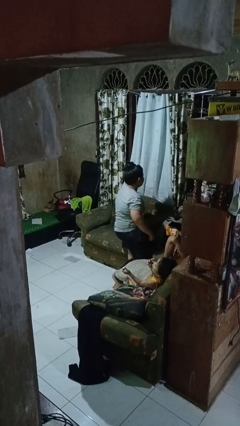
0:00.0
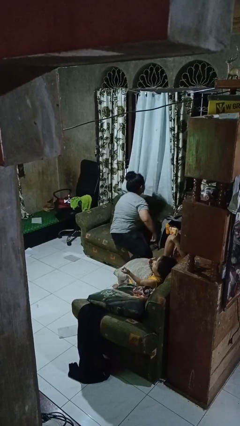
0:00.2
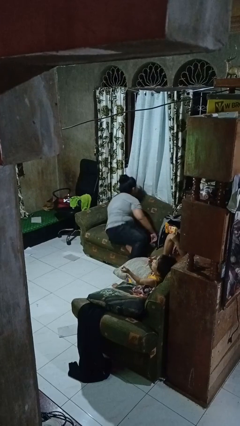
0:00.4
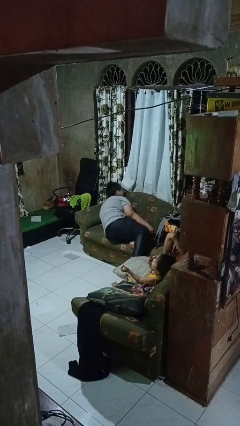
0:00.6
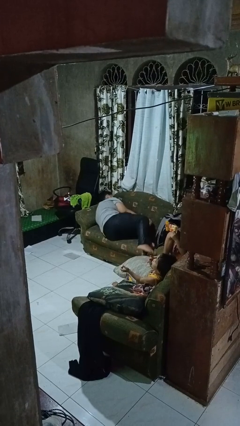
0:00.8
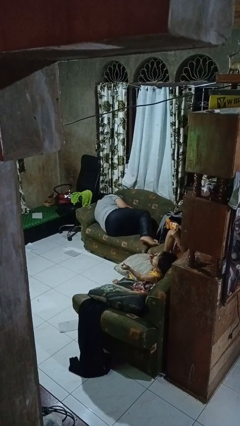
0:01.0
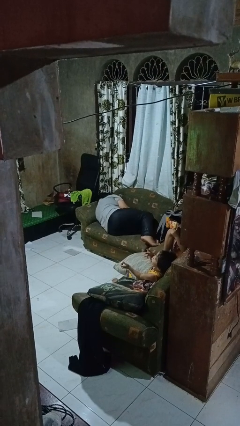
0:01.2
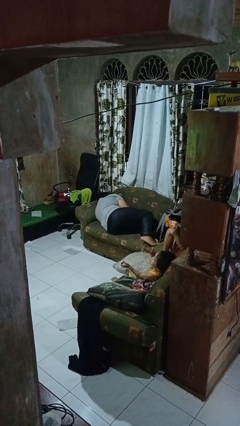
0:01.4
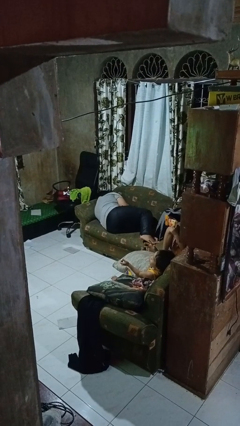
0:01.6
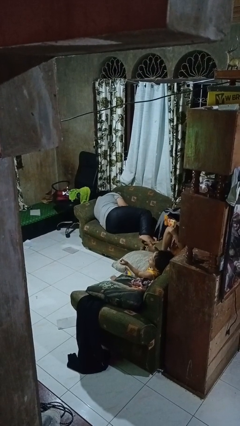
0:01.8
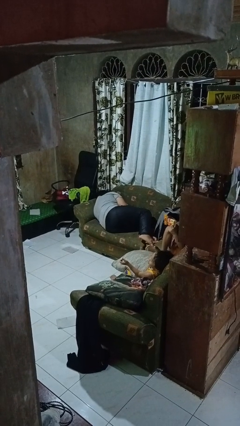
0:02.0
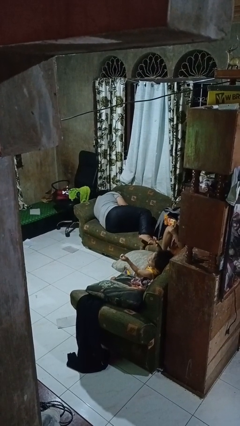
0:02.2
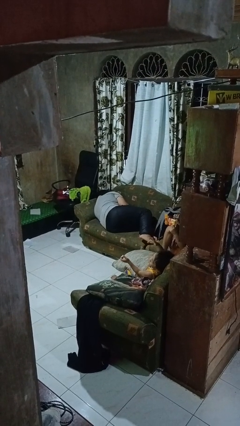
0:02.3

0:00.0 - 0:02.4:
person lies down on couch

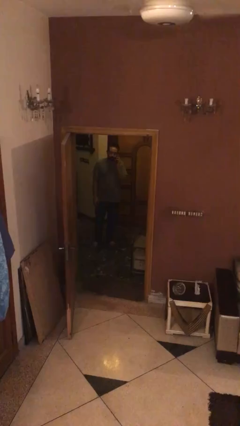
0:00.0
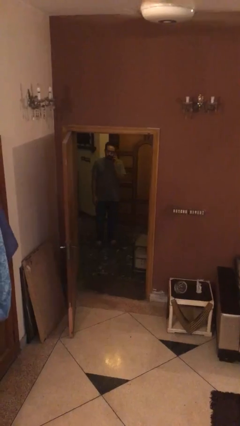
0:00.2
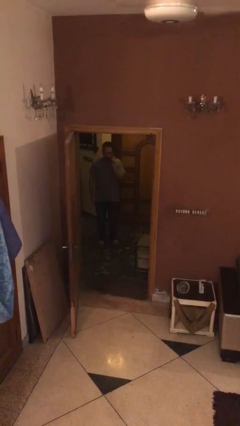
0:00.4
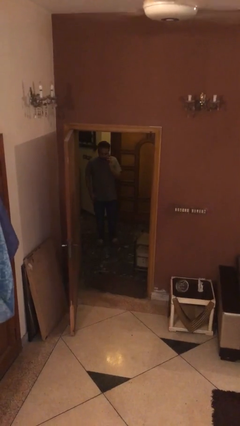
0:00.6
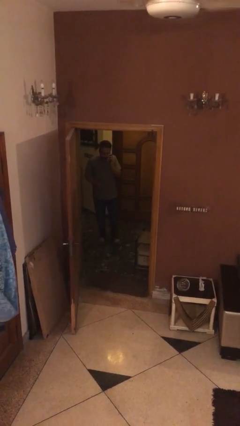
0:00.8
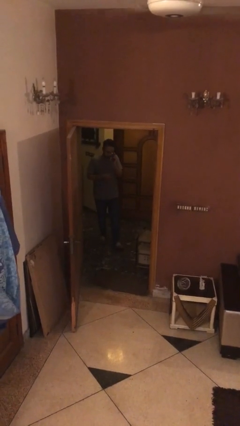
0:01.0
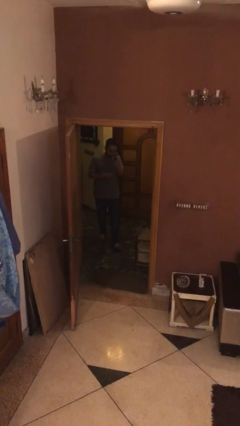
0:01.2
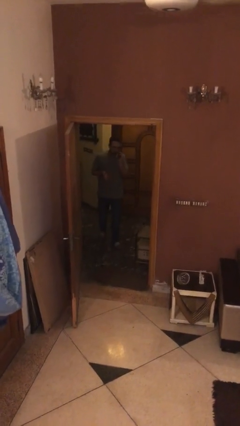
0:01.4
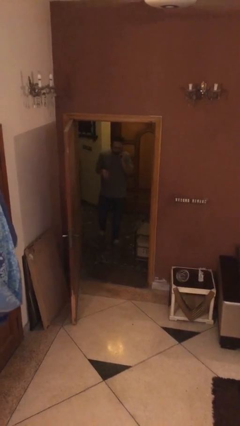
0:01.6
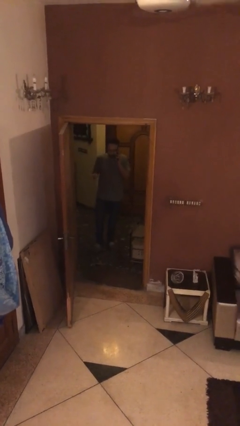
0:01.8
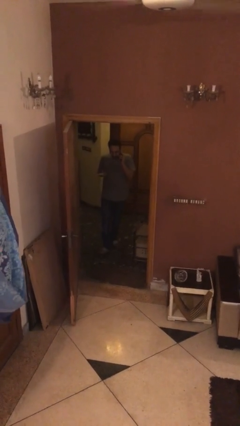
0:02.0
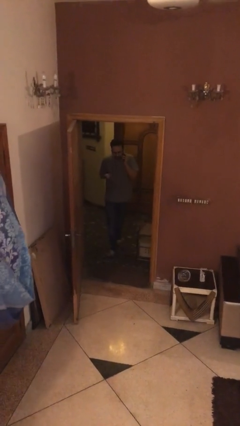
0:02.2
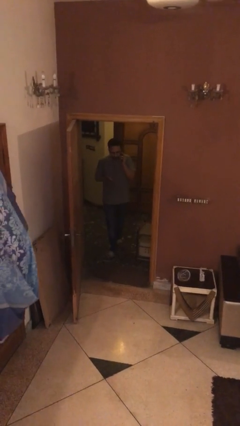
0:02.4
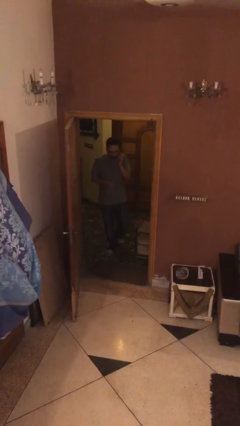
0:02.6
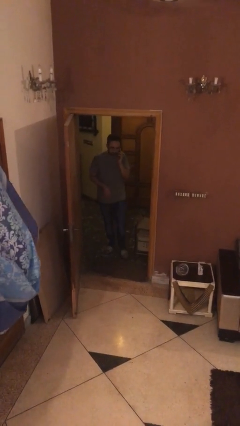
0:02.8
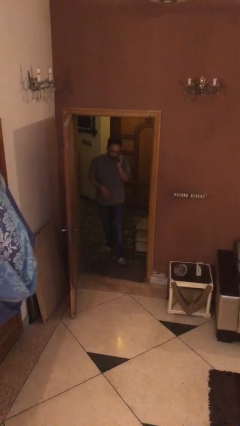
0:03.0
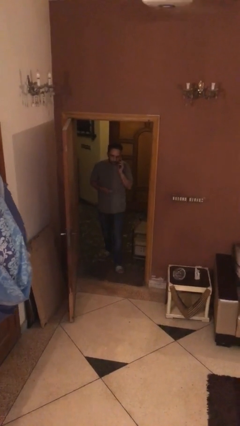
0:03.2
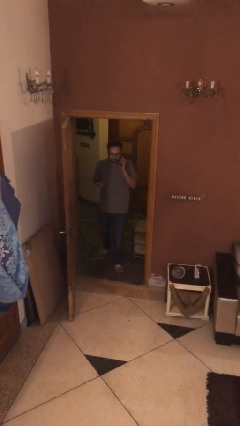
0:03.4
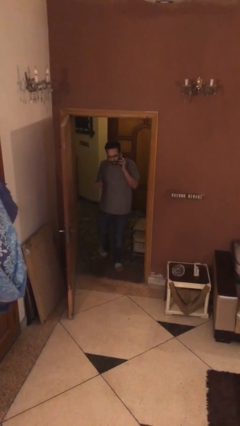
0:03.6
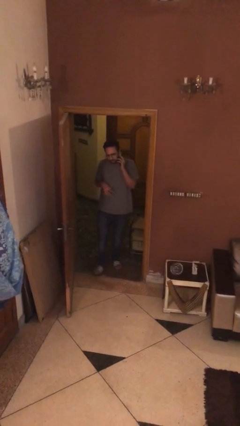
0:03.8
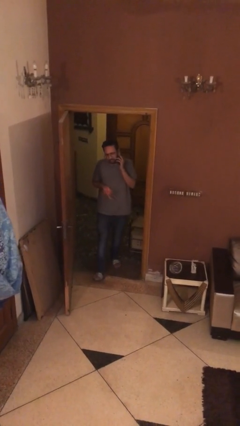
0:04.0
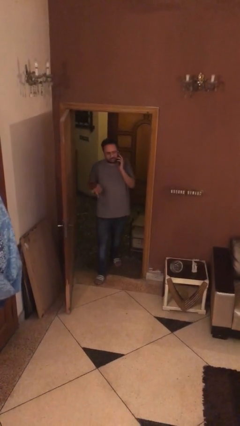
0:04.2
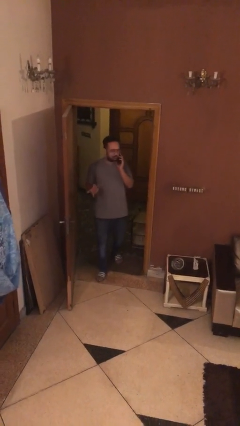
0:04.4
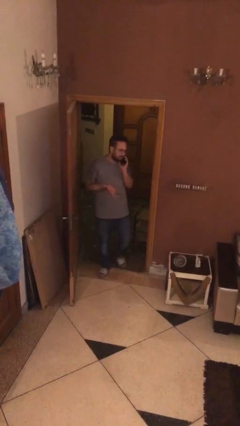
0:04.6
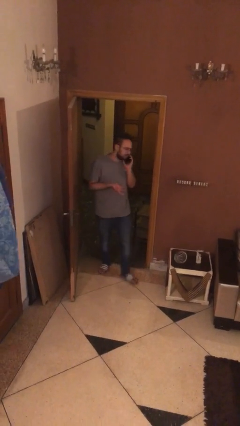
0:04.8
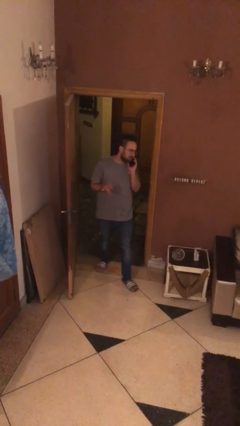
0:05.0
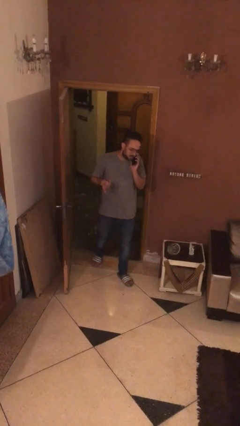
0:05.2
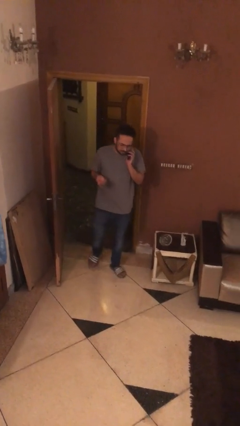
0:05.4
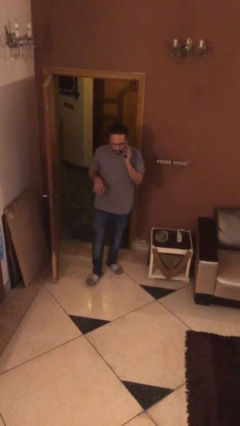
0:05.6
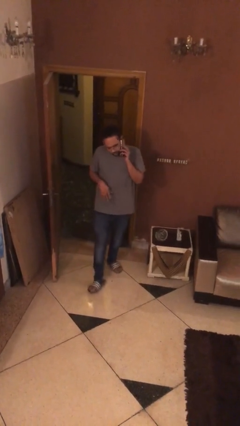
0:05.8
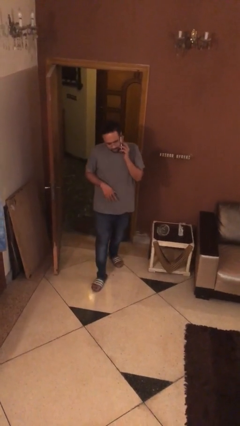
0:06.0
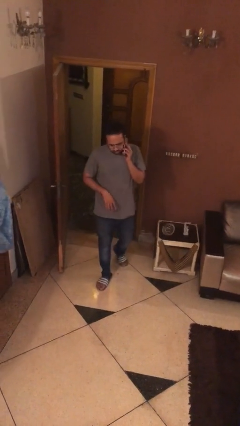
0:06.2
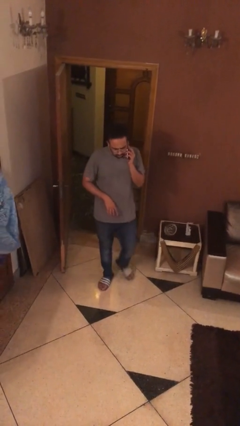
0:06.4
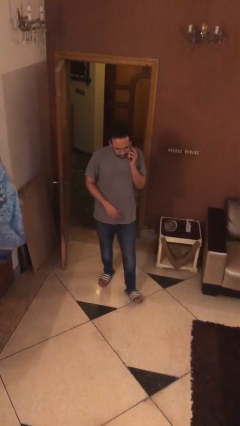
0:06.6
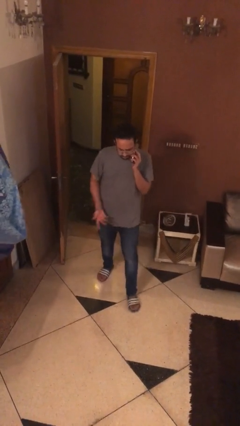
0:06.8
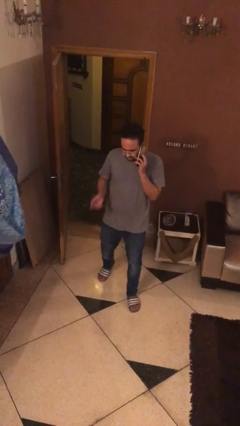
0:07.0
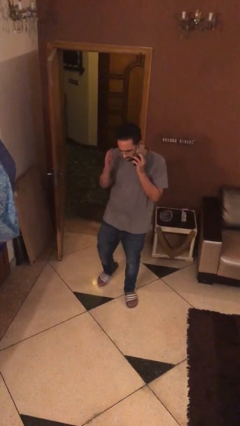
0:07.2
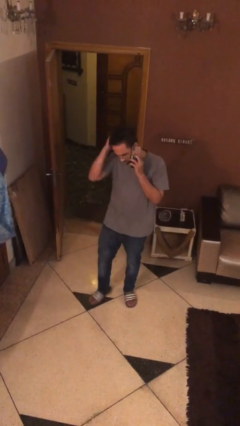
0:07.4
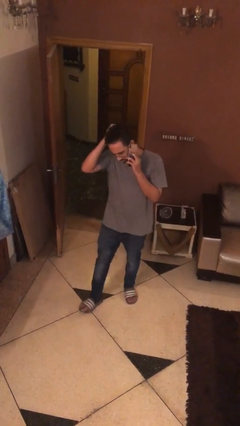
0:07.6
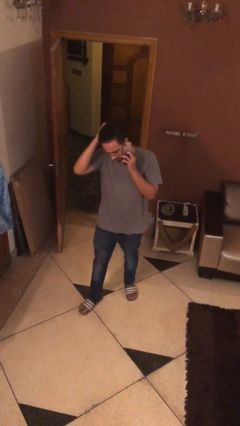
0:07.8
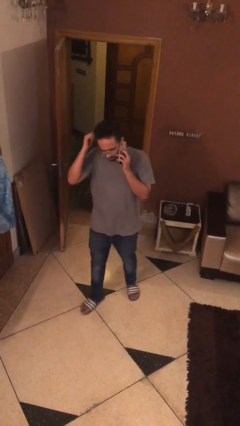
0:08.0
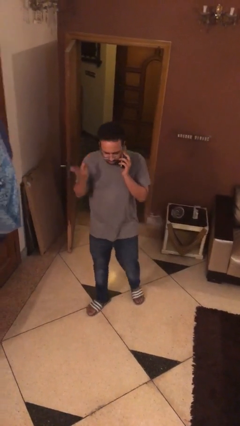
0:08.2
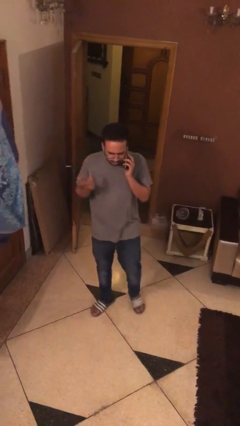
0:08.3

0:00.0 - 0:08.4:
person enters scene through structure

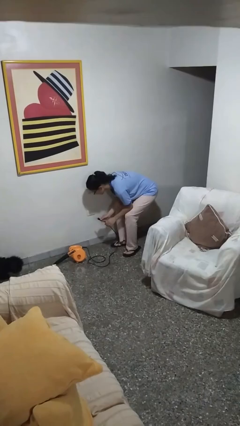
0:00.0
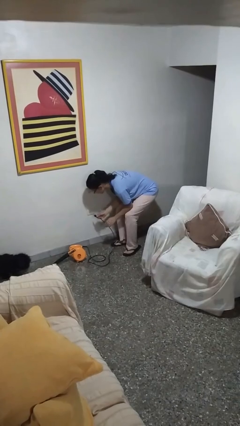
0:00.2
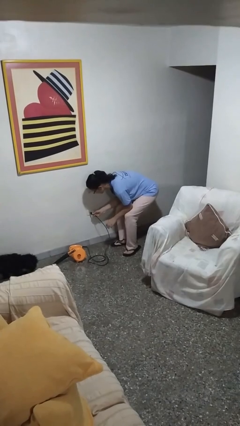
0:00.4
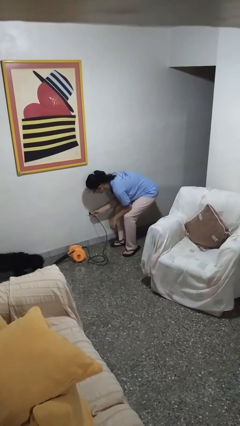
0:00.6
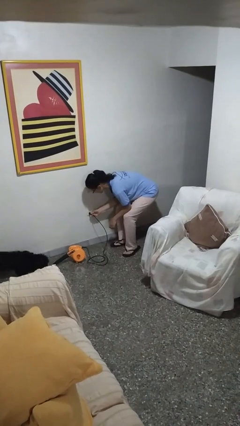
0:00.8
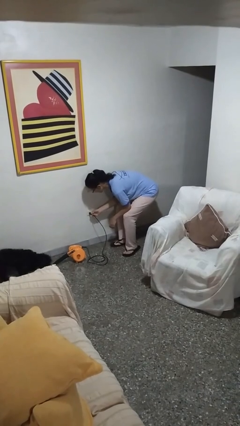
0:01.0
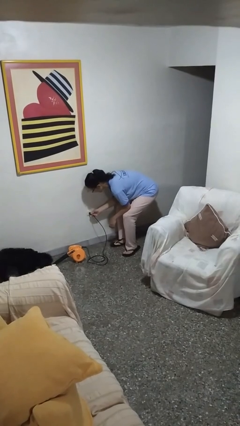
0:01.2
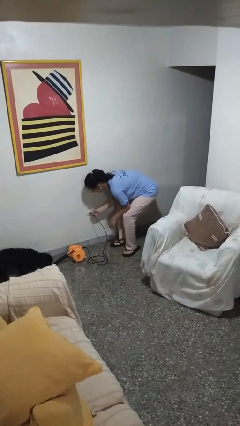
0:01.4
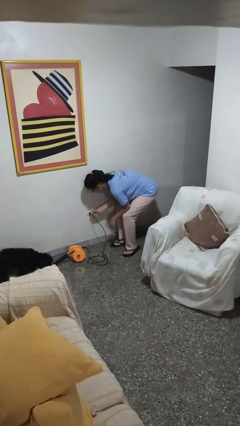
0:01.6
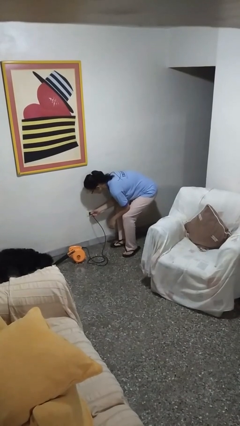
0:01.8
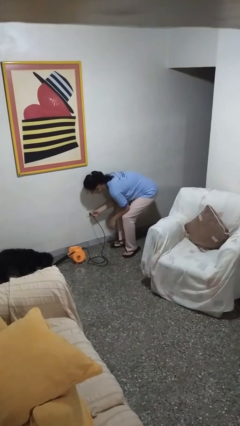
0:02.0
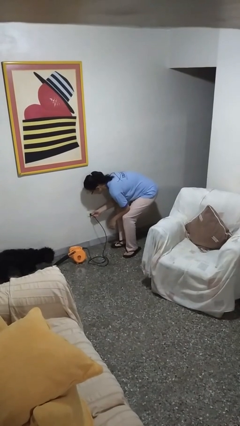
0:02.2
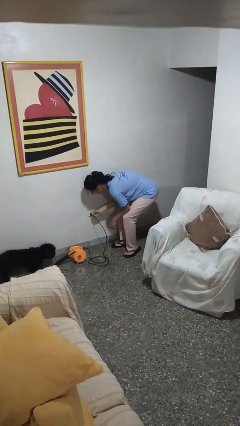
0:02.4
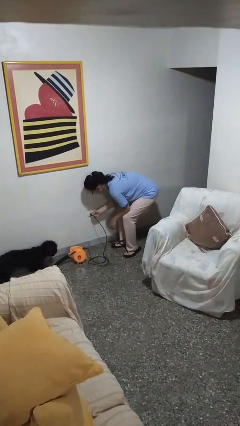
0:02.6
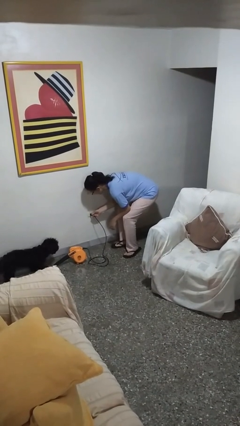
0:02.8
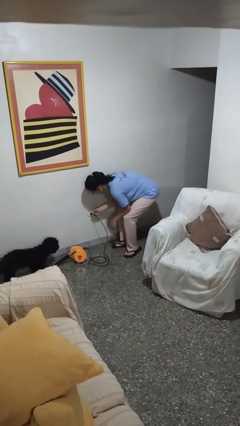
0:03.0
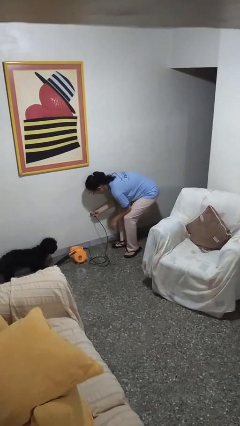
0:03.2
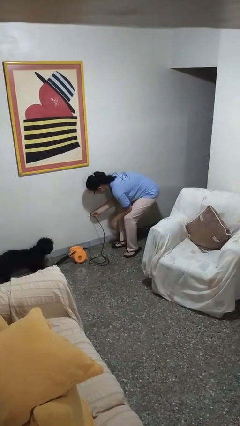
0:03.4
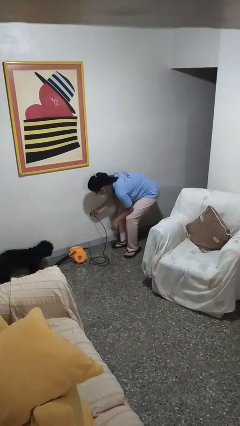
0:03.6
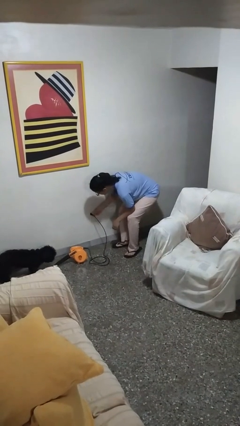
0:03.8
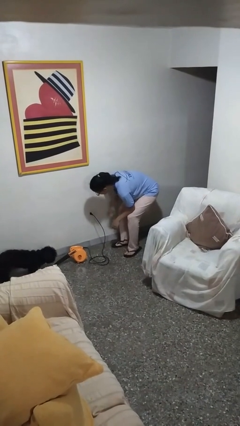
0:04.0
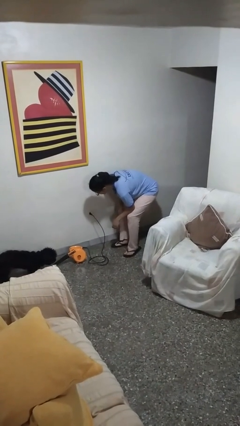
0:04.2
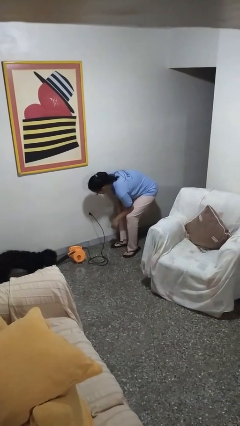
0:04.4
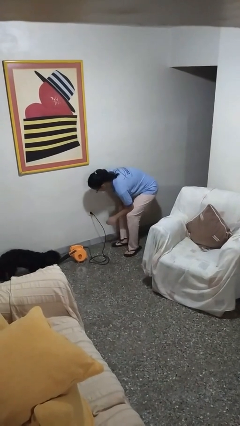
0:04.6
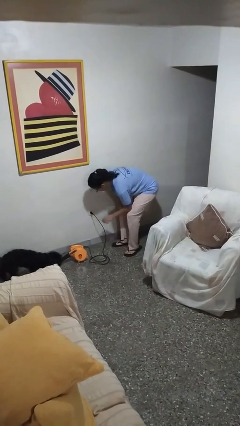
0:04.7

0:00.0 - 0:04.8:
person plugs into electrical socket

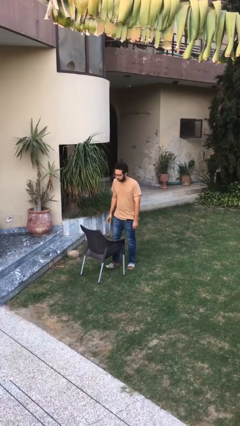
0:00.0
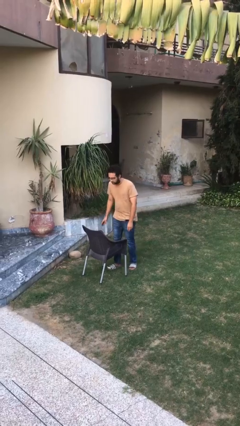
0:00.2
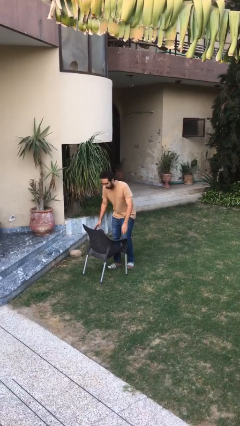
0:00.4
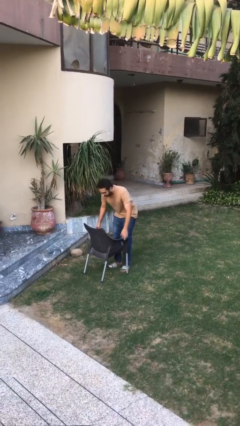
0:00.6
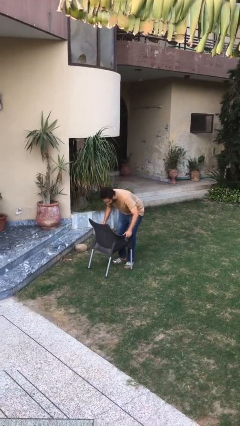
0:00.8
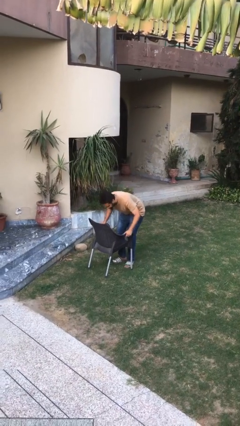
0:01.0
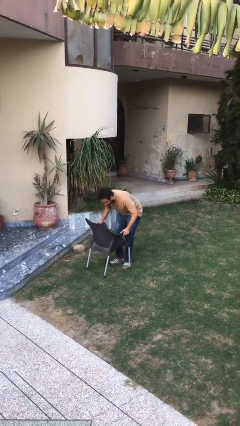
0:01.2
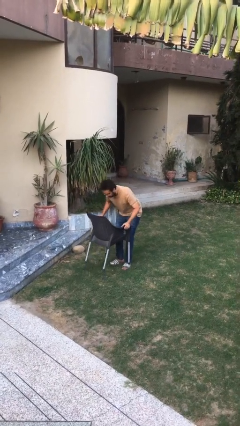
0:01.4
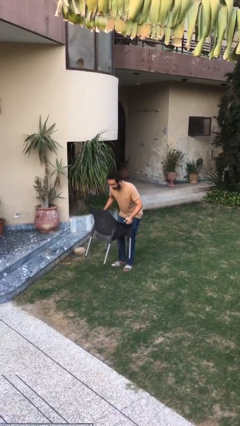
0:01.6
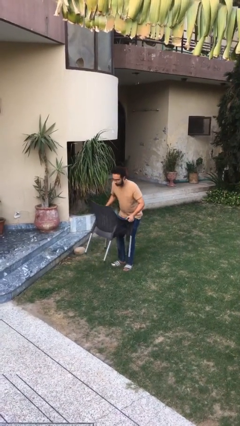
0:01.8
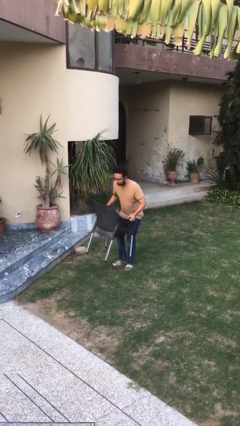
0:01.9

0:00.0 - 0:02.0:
person picks up object from floor

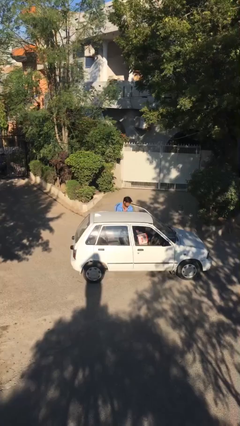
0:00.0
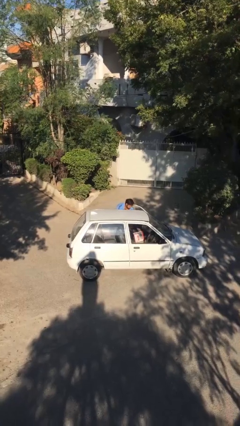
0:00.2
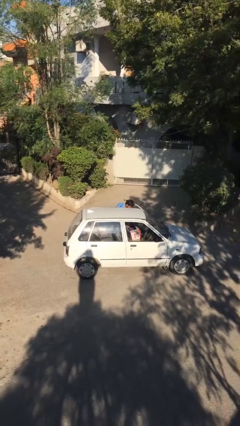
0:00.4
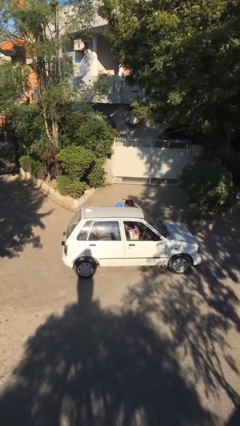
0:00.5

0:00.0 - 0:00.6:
person unloads car
